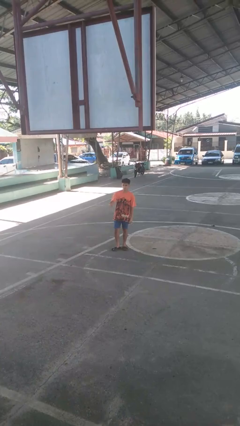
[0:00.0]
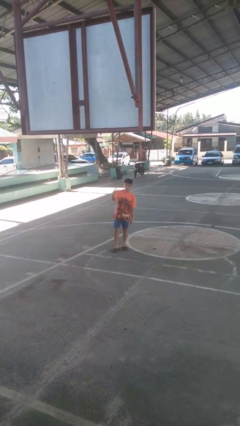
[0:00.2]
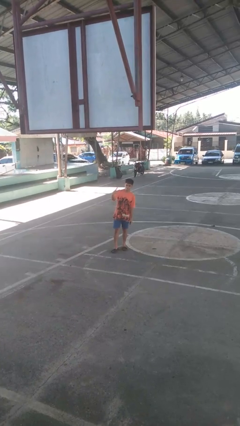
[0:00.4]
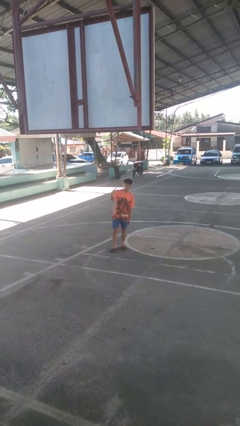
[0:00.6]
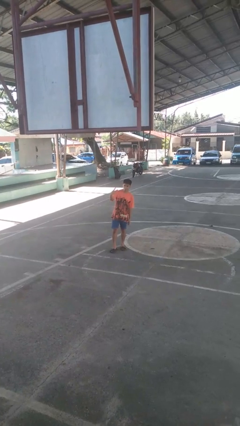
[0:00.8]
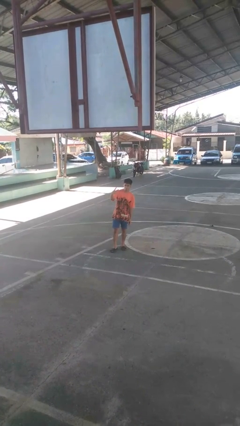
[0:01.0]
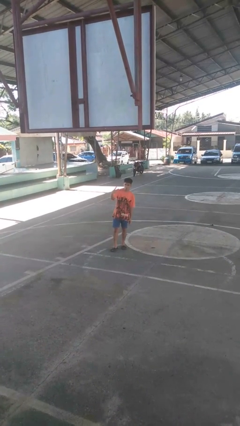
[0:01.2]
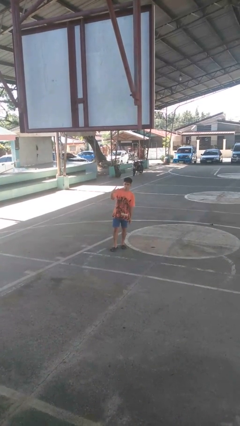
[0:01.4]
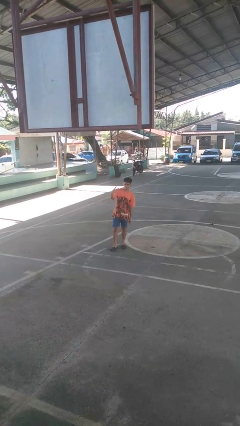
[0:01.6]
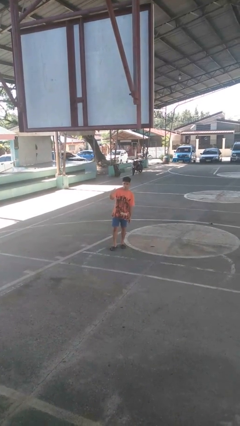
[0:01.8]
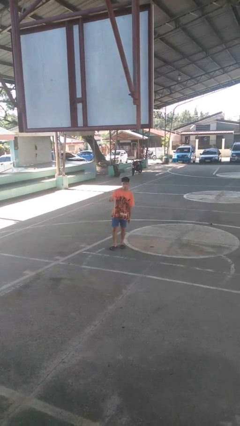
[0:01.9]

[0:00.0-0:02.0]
person gestures peace

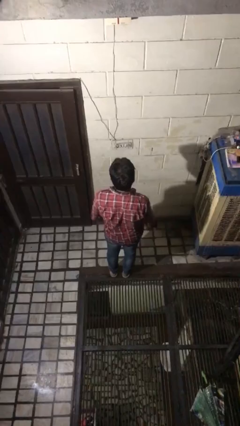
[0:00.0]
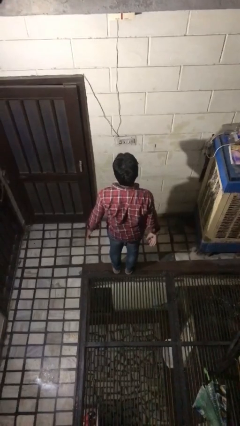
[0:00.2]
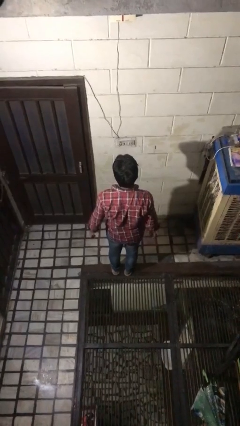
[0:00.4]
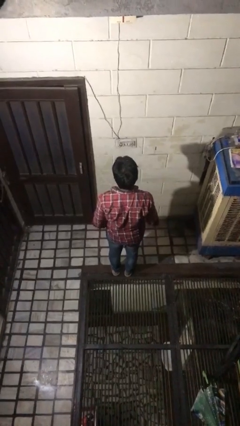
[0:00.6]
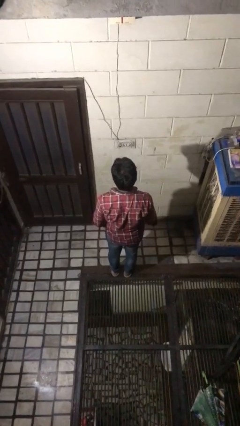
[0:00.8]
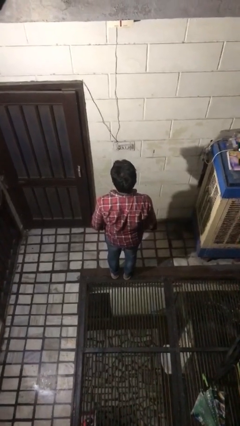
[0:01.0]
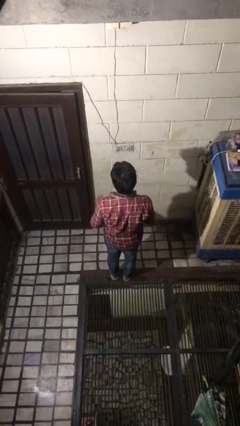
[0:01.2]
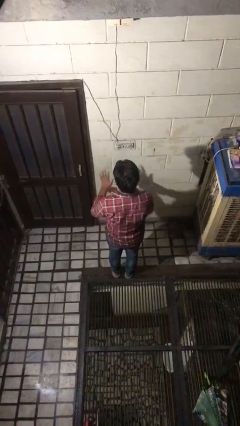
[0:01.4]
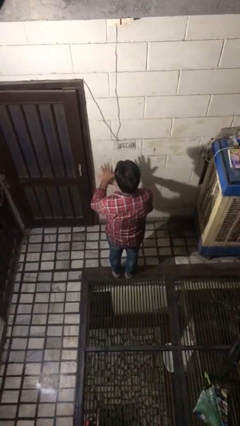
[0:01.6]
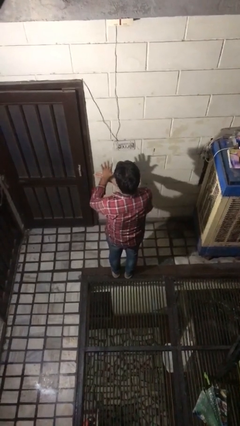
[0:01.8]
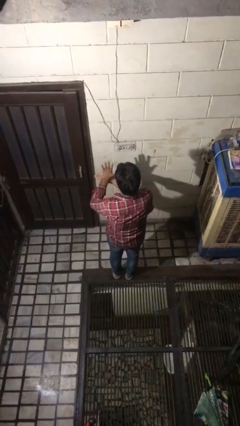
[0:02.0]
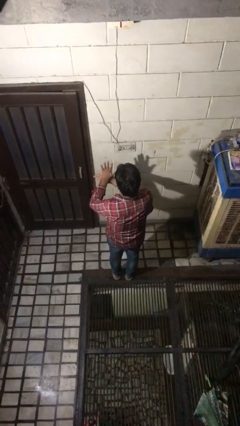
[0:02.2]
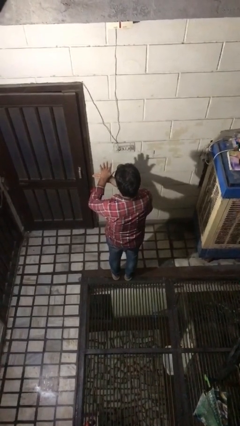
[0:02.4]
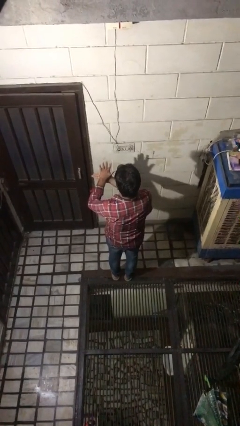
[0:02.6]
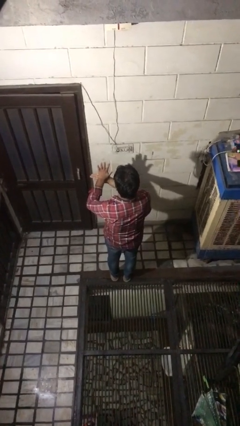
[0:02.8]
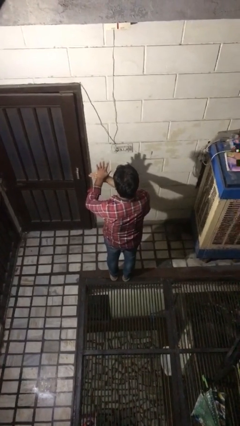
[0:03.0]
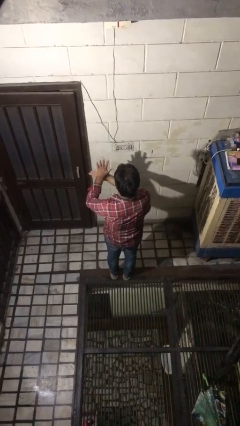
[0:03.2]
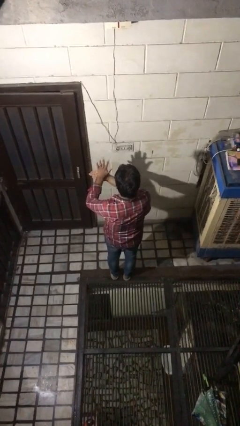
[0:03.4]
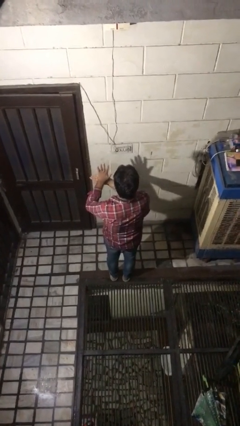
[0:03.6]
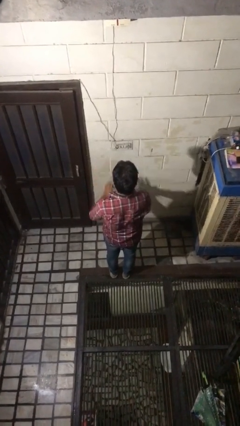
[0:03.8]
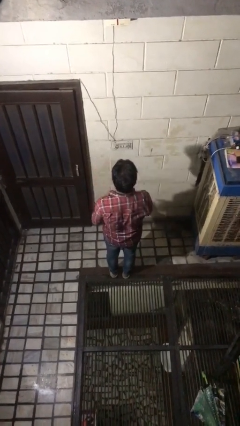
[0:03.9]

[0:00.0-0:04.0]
person gestures number five

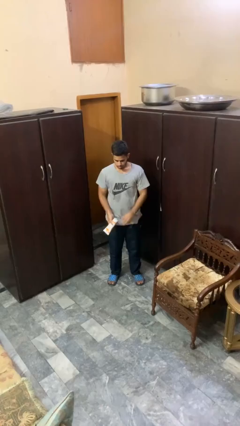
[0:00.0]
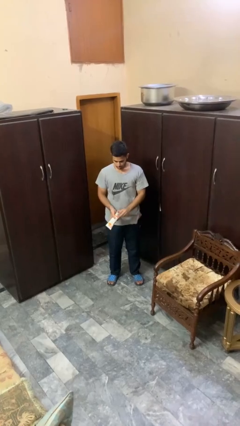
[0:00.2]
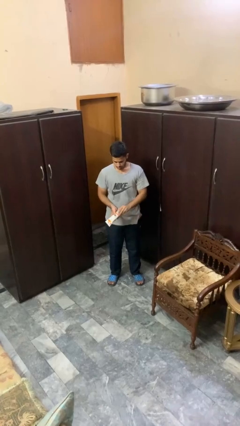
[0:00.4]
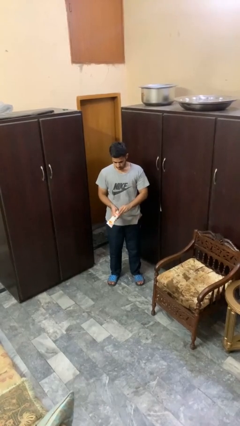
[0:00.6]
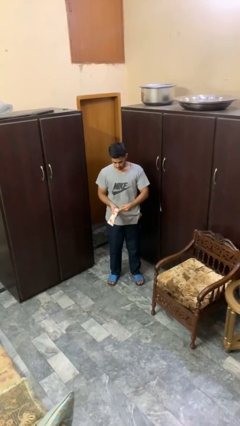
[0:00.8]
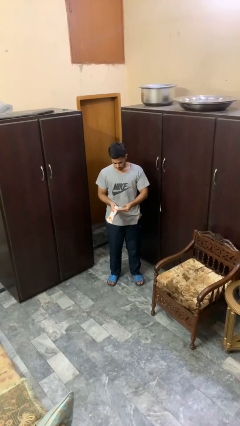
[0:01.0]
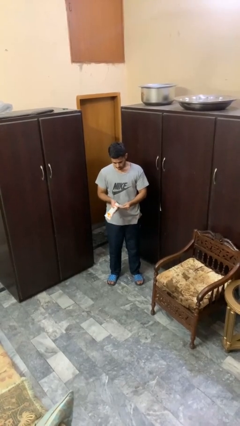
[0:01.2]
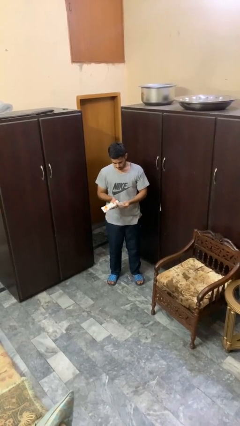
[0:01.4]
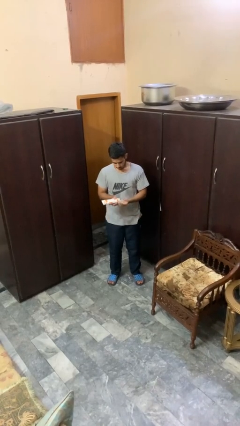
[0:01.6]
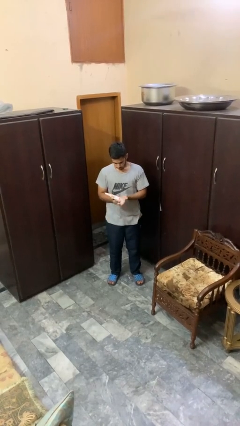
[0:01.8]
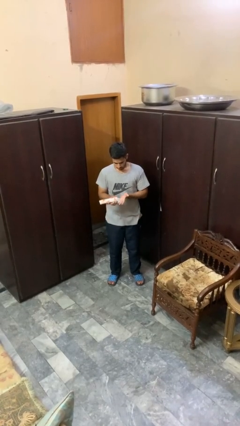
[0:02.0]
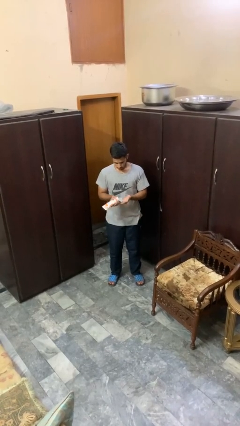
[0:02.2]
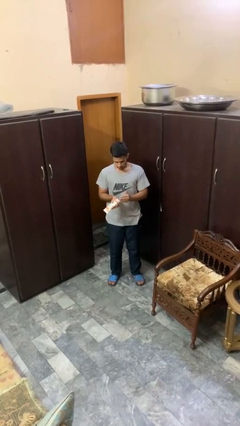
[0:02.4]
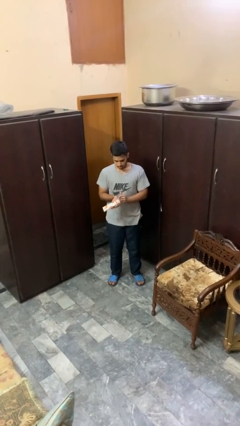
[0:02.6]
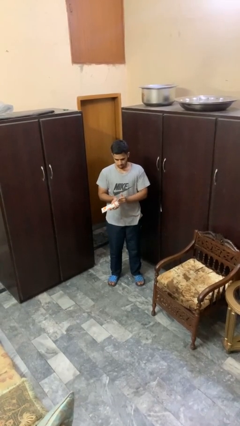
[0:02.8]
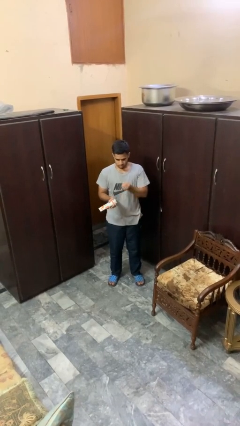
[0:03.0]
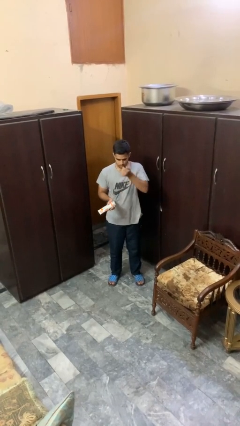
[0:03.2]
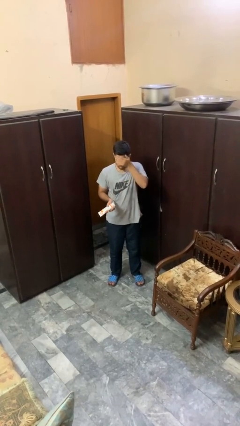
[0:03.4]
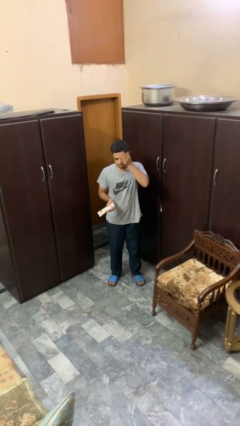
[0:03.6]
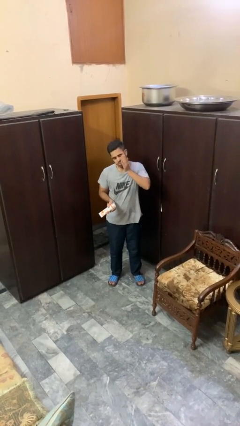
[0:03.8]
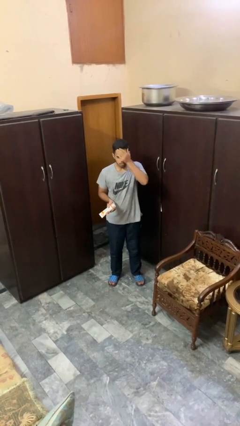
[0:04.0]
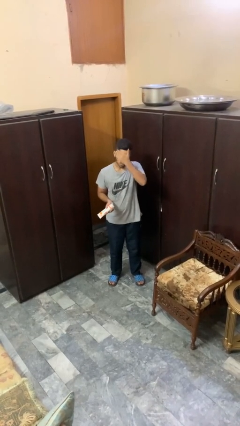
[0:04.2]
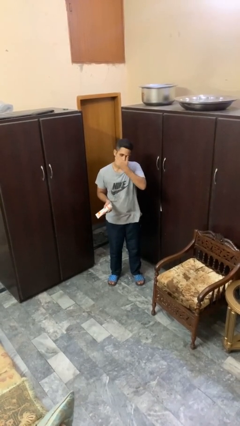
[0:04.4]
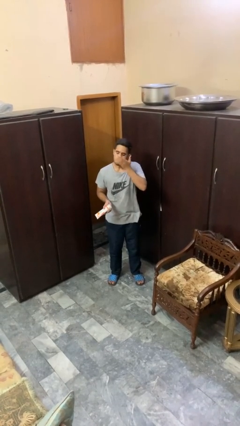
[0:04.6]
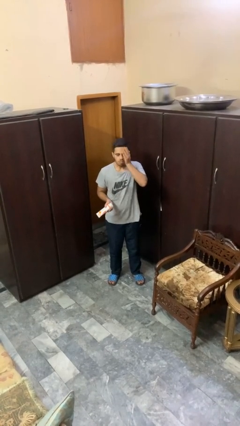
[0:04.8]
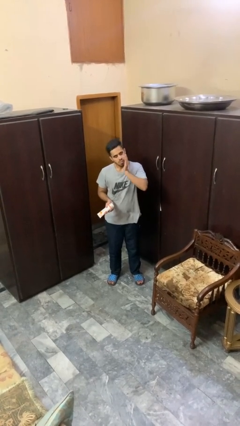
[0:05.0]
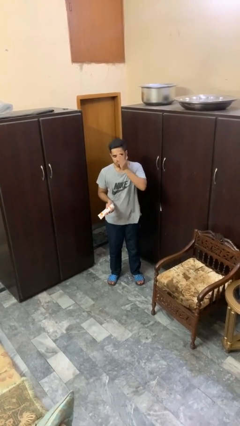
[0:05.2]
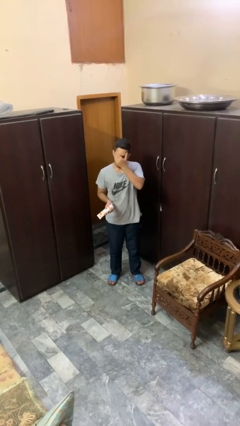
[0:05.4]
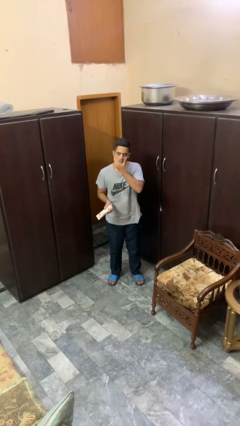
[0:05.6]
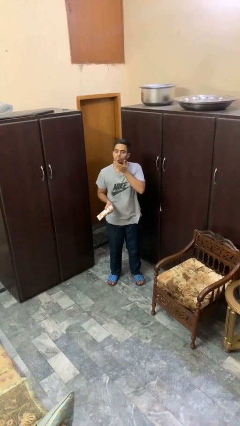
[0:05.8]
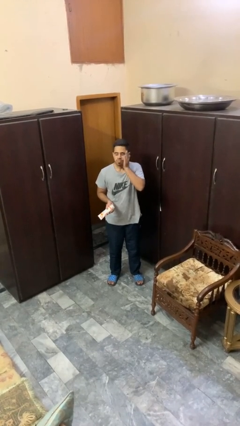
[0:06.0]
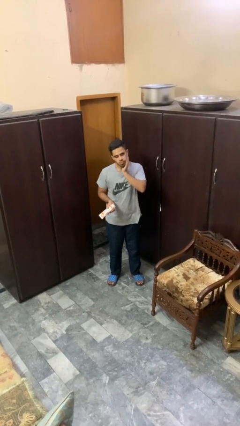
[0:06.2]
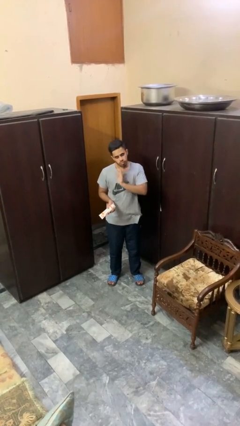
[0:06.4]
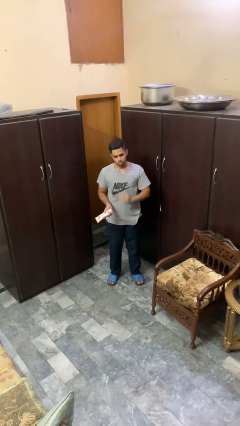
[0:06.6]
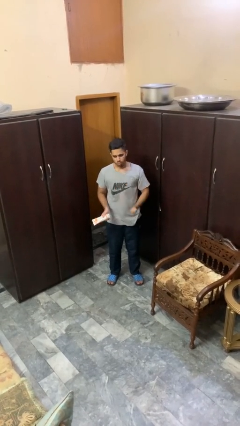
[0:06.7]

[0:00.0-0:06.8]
person applies sunscreen

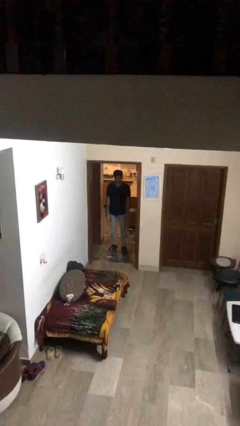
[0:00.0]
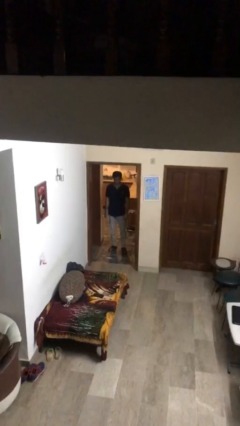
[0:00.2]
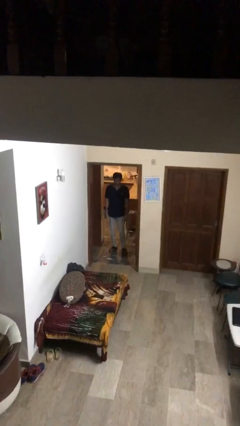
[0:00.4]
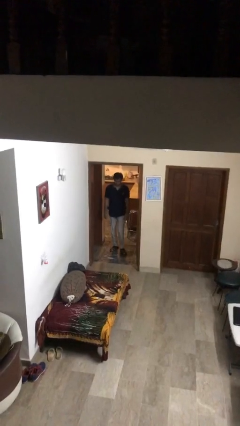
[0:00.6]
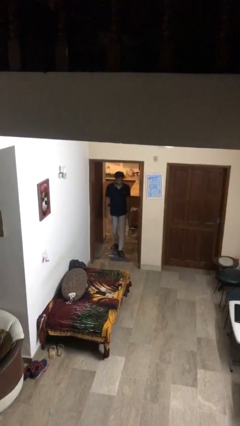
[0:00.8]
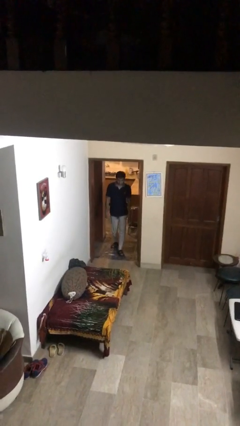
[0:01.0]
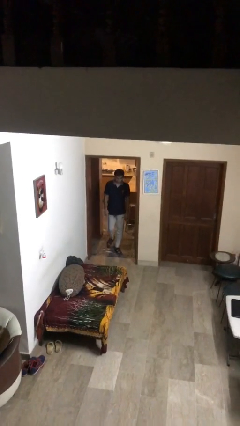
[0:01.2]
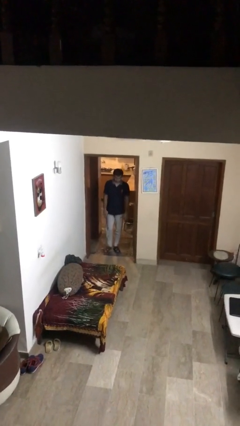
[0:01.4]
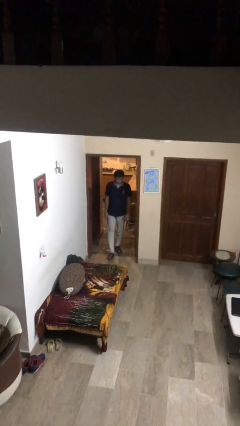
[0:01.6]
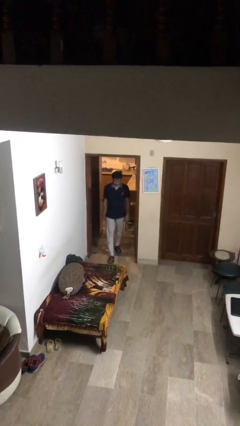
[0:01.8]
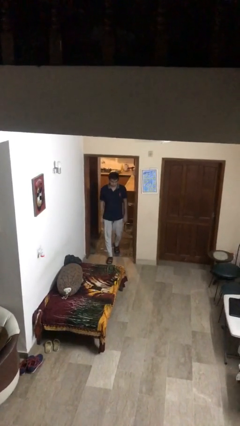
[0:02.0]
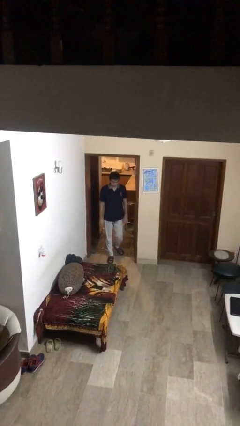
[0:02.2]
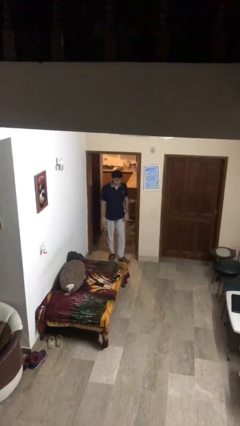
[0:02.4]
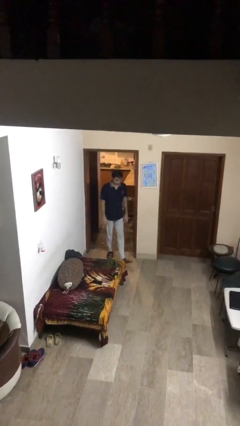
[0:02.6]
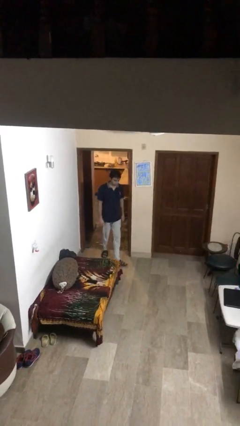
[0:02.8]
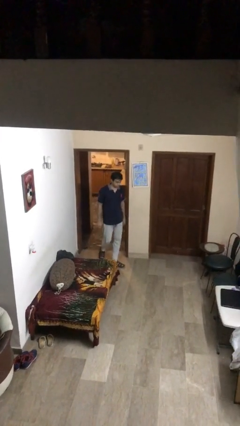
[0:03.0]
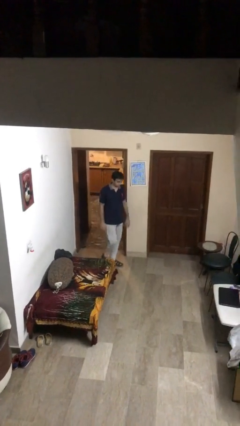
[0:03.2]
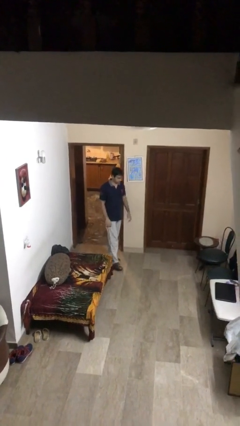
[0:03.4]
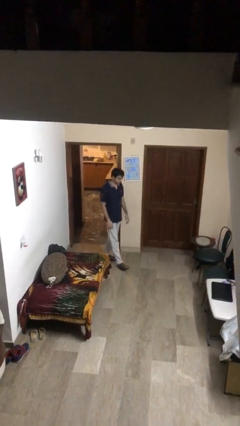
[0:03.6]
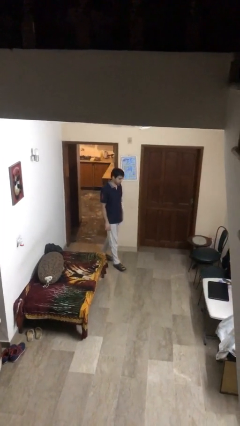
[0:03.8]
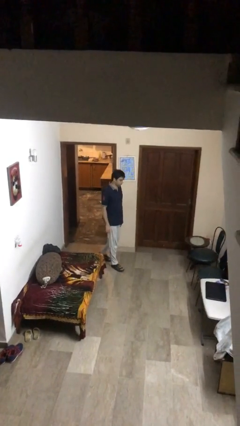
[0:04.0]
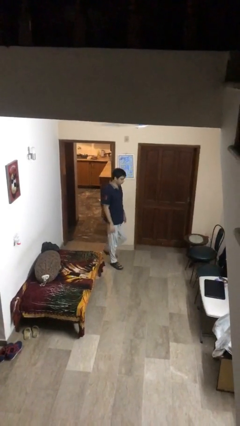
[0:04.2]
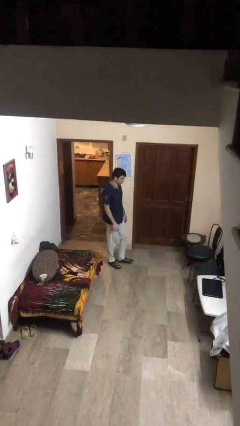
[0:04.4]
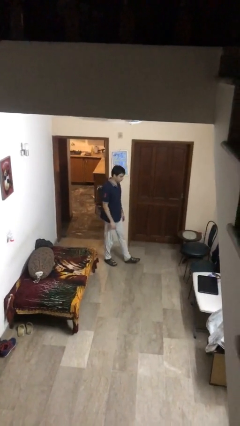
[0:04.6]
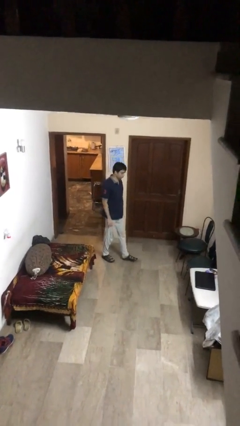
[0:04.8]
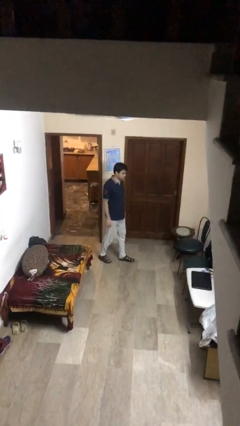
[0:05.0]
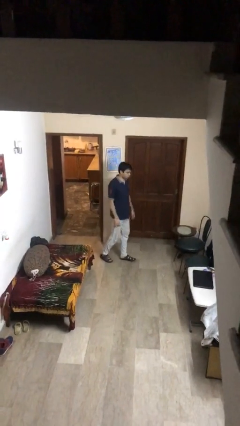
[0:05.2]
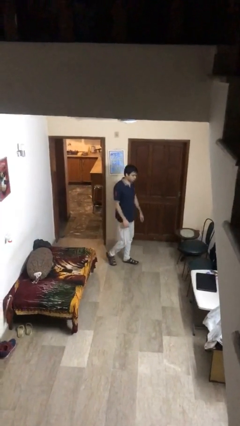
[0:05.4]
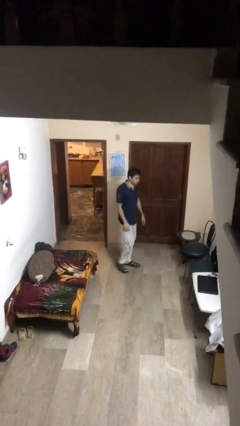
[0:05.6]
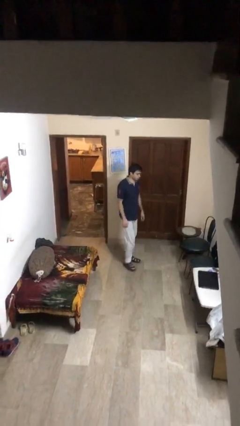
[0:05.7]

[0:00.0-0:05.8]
person enters scene through structure
